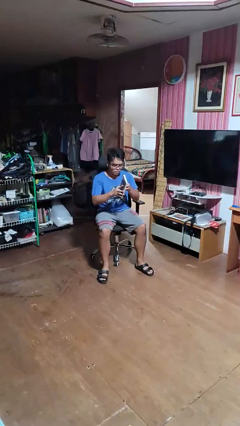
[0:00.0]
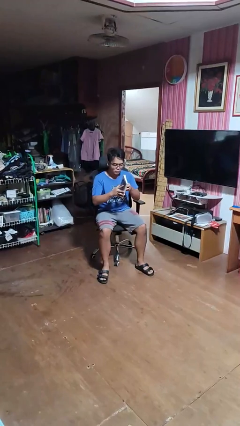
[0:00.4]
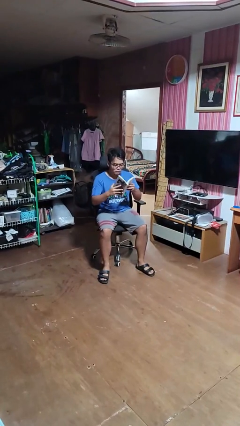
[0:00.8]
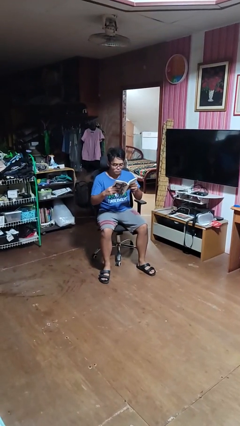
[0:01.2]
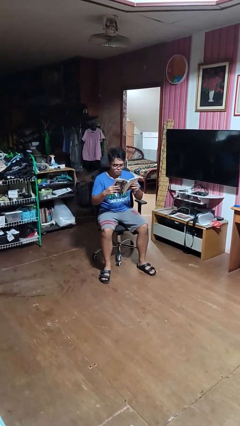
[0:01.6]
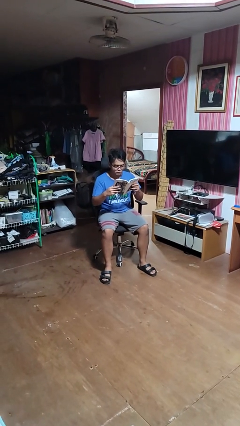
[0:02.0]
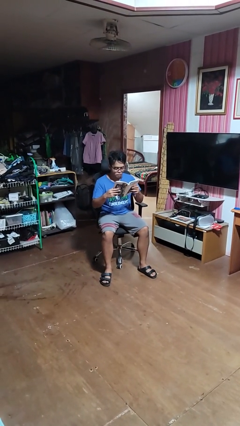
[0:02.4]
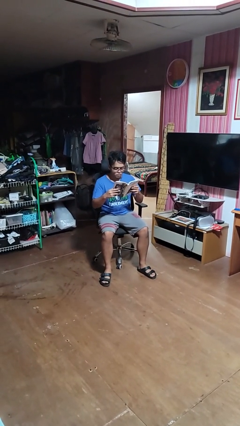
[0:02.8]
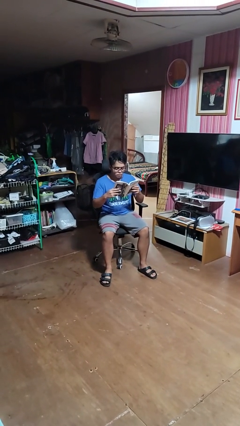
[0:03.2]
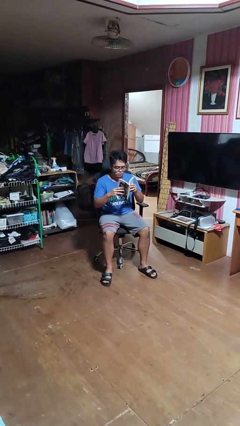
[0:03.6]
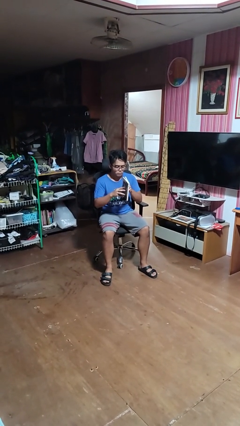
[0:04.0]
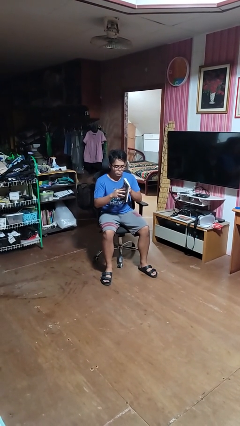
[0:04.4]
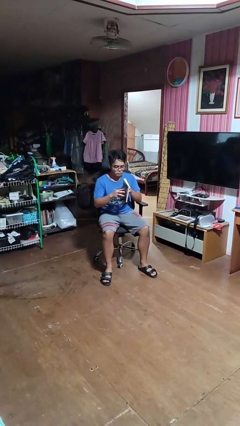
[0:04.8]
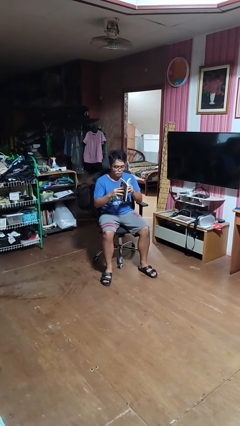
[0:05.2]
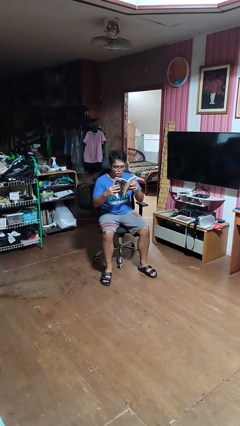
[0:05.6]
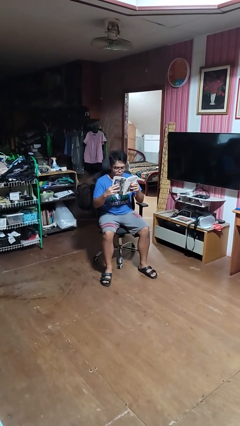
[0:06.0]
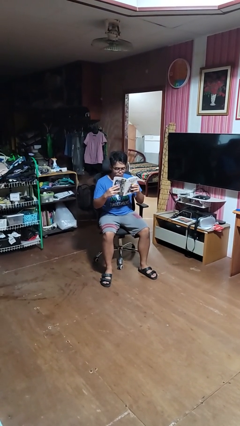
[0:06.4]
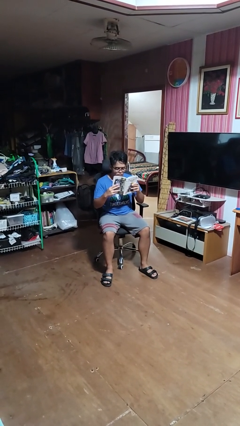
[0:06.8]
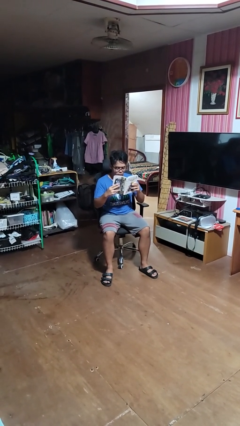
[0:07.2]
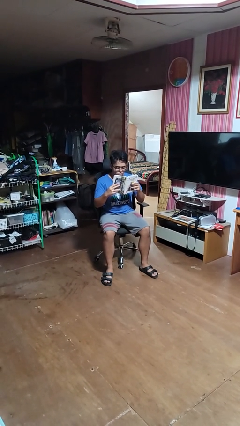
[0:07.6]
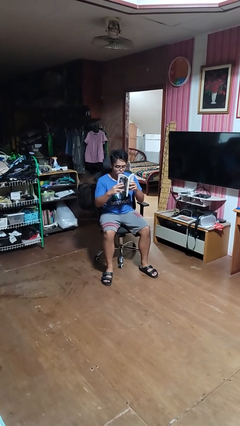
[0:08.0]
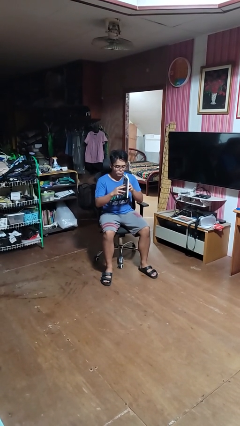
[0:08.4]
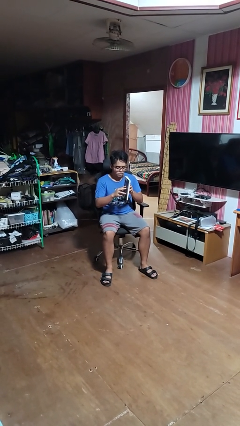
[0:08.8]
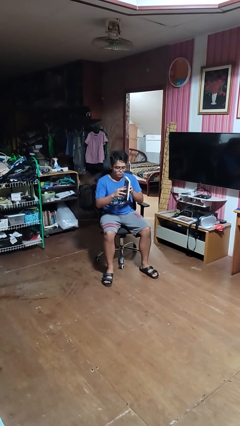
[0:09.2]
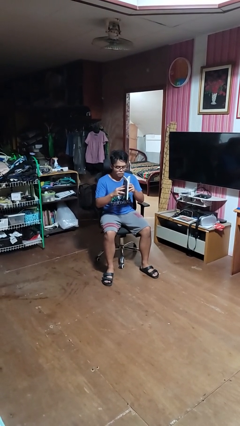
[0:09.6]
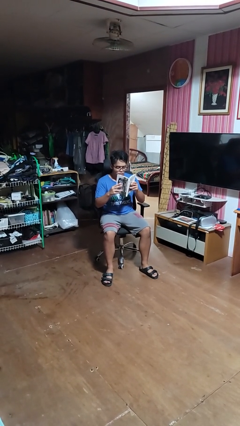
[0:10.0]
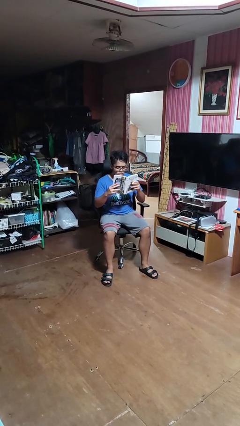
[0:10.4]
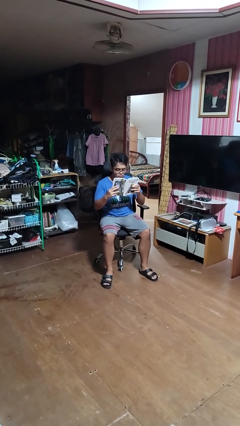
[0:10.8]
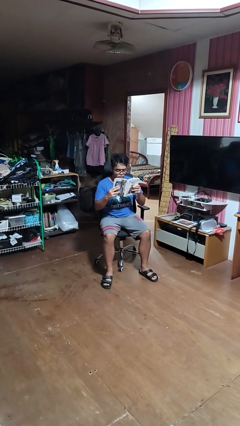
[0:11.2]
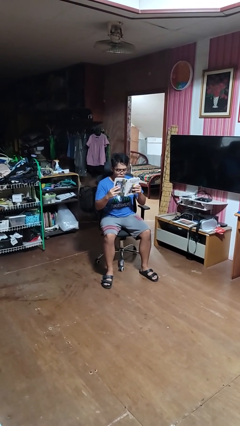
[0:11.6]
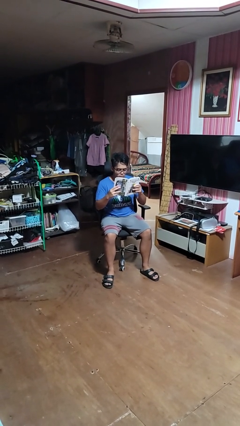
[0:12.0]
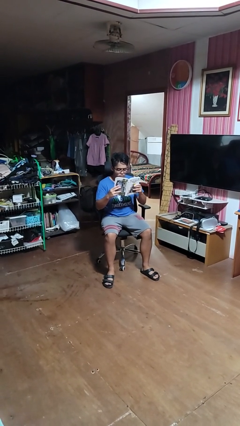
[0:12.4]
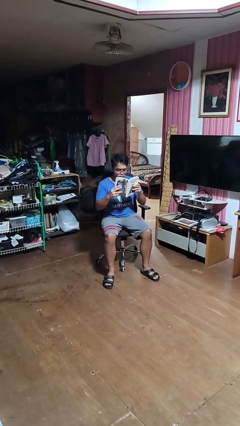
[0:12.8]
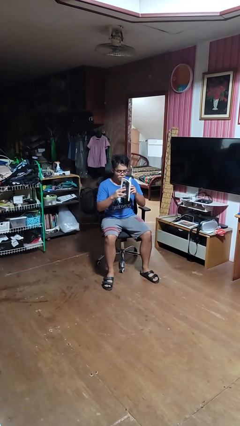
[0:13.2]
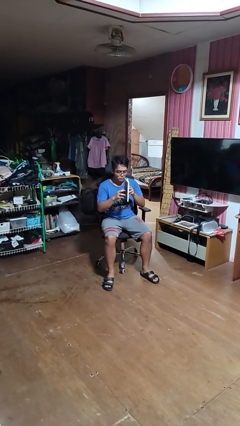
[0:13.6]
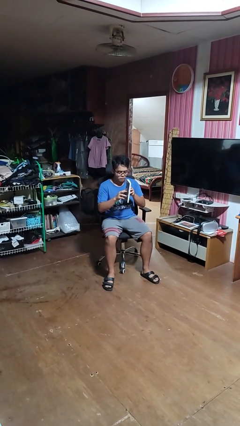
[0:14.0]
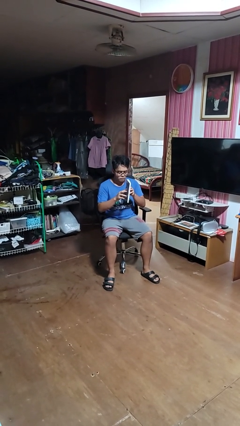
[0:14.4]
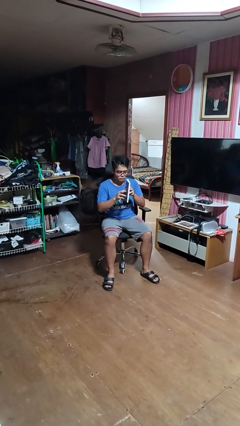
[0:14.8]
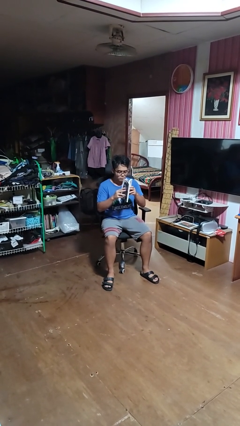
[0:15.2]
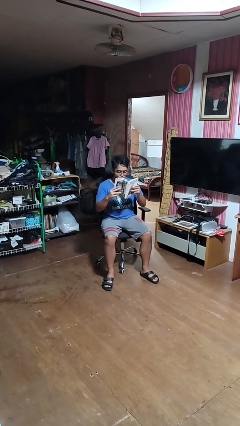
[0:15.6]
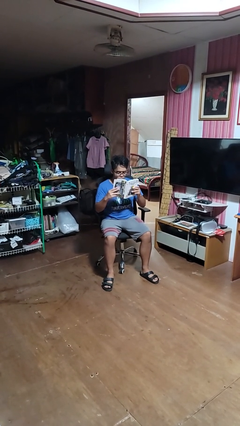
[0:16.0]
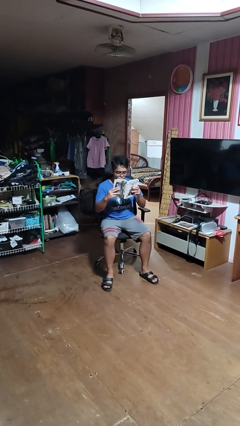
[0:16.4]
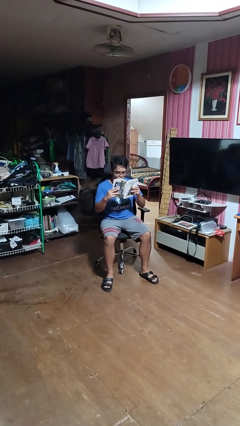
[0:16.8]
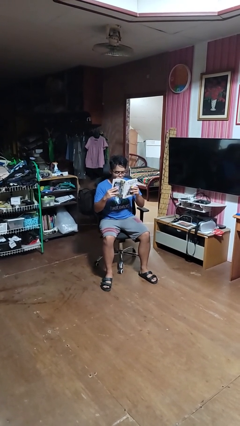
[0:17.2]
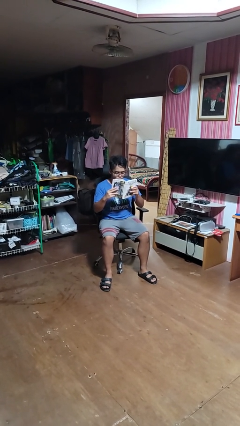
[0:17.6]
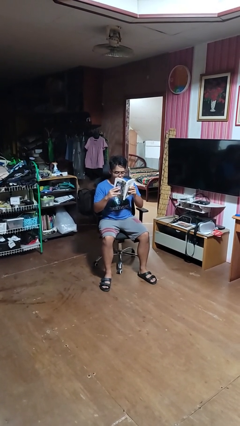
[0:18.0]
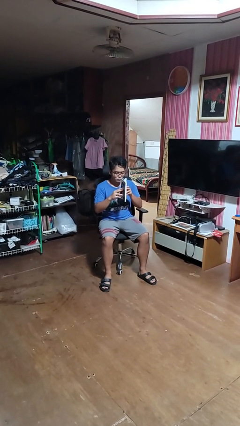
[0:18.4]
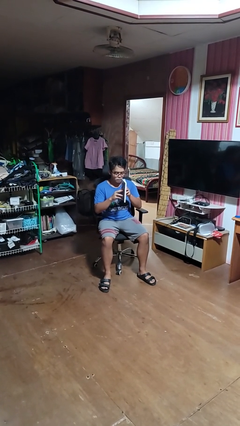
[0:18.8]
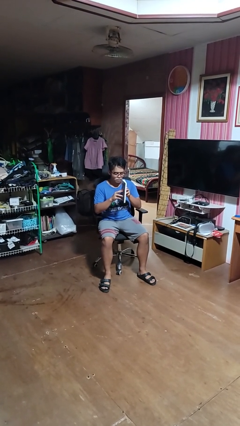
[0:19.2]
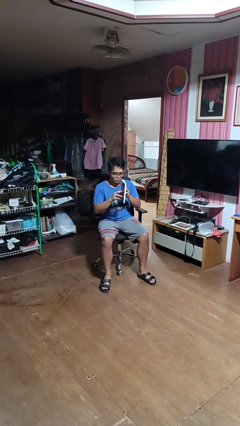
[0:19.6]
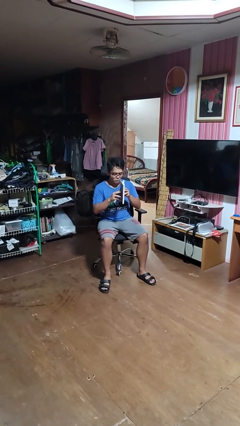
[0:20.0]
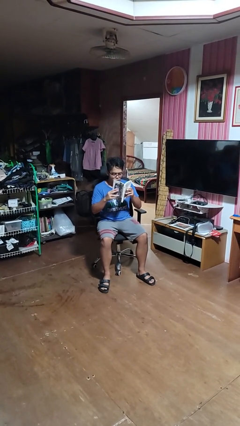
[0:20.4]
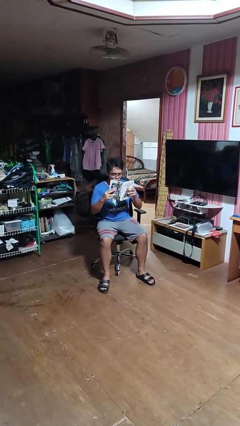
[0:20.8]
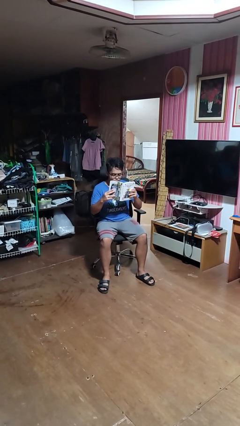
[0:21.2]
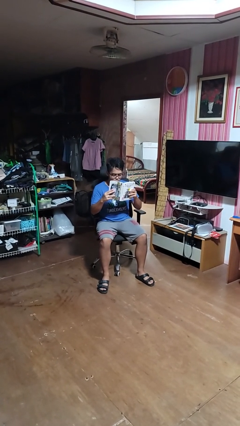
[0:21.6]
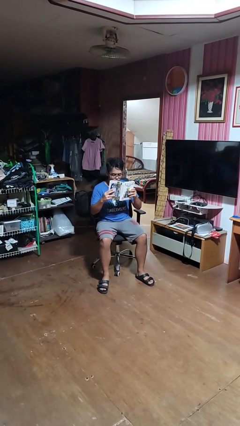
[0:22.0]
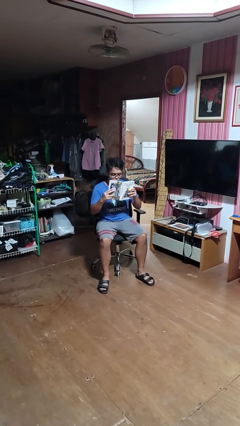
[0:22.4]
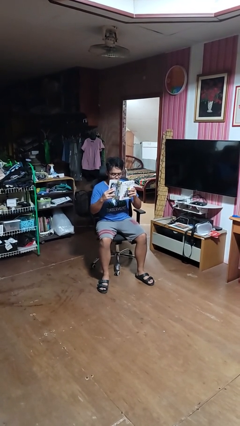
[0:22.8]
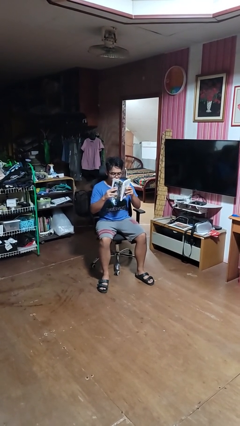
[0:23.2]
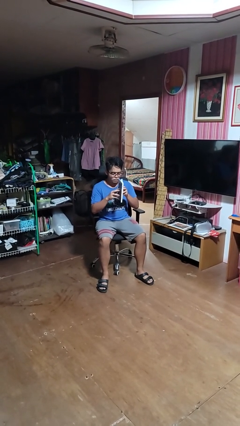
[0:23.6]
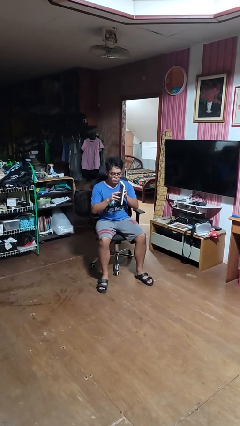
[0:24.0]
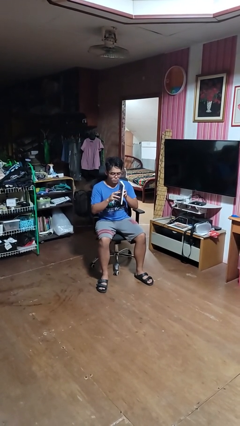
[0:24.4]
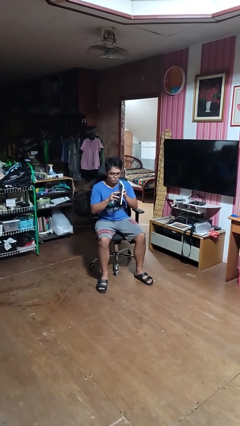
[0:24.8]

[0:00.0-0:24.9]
person reads book

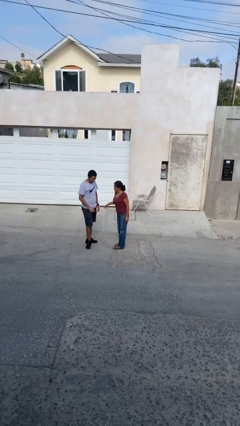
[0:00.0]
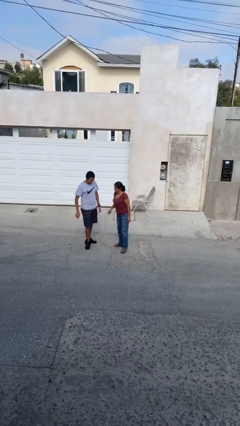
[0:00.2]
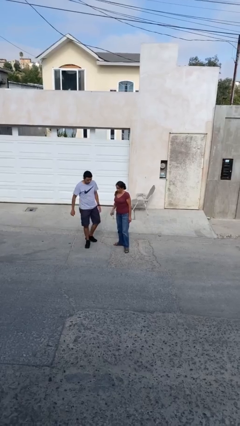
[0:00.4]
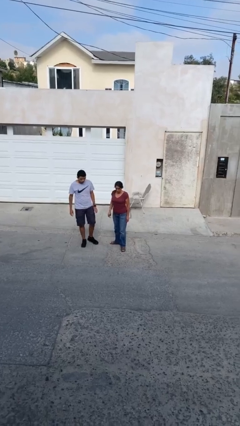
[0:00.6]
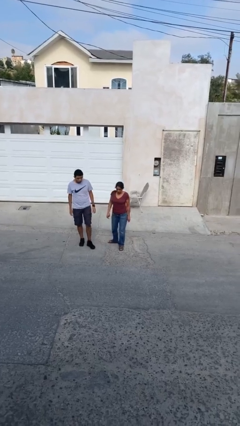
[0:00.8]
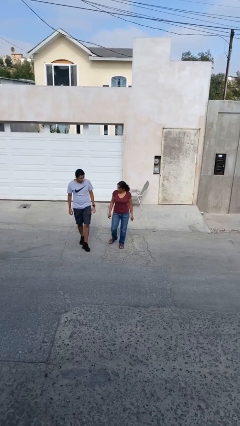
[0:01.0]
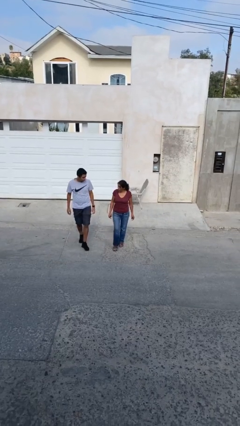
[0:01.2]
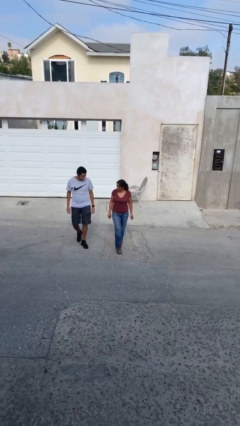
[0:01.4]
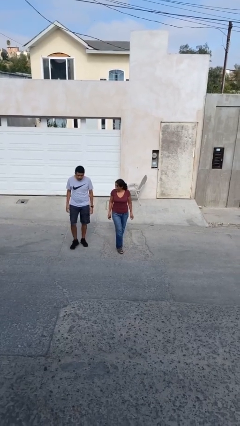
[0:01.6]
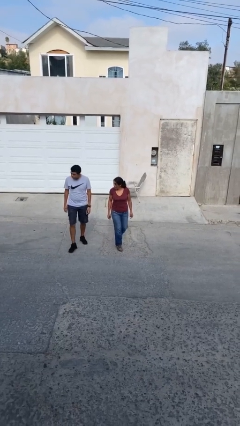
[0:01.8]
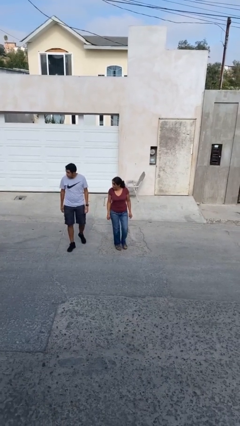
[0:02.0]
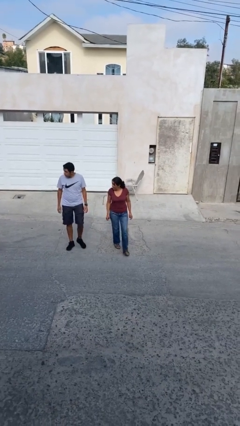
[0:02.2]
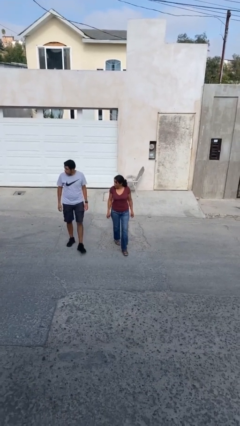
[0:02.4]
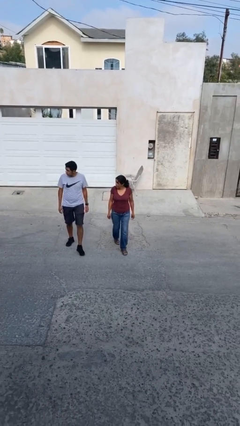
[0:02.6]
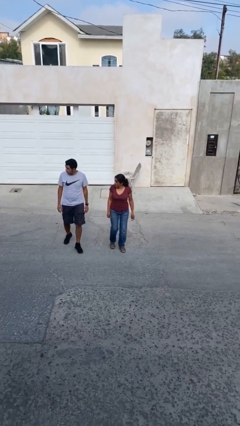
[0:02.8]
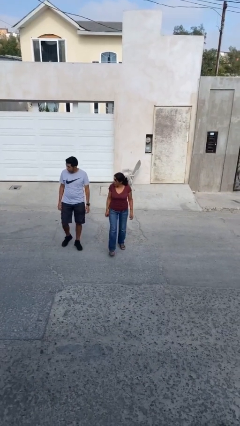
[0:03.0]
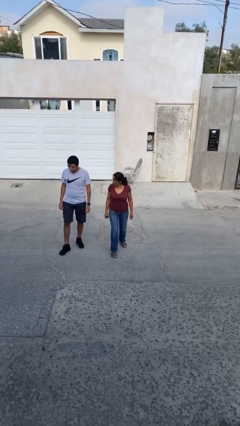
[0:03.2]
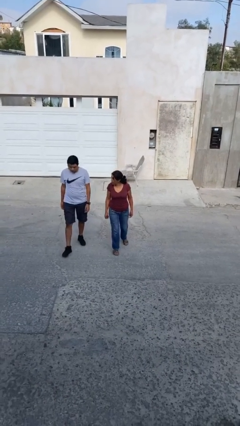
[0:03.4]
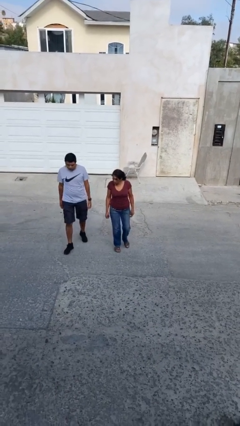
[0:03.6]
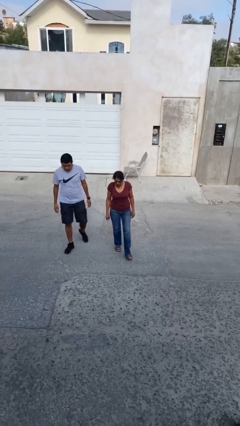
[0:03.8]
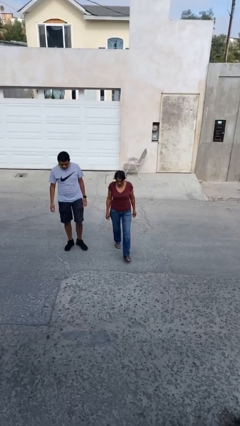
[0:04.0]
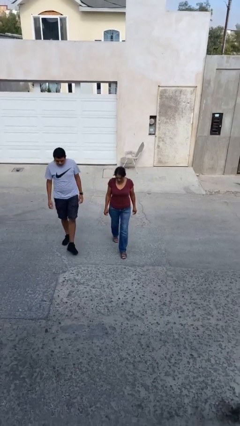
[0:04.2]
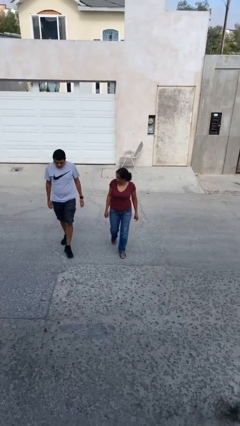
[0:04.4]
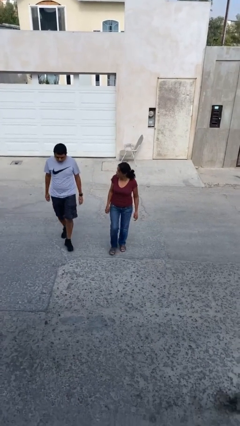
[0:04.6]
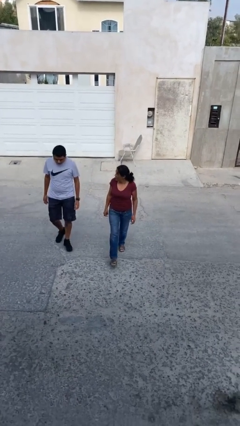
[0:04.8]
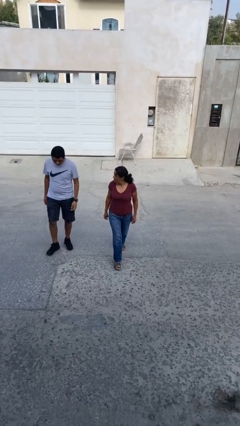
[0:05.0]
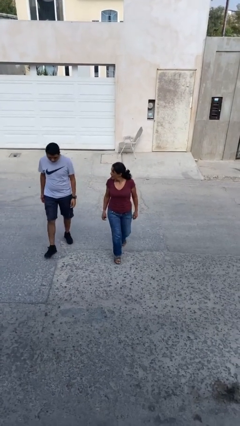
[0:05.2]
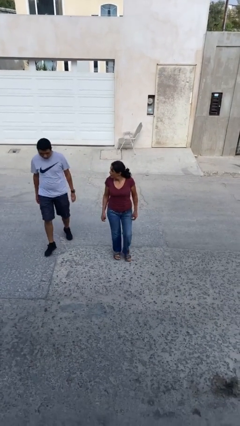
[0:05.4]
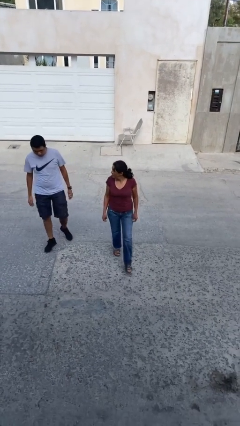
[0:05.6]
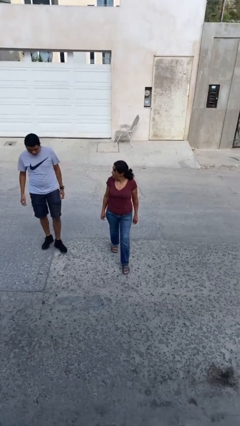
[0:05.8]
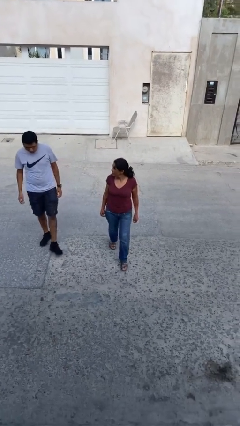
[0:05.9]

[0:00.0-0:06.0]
person talks to person
